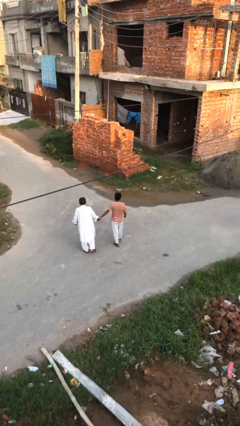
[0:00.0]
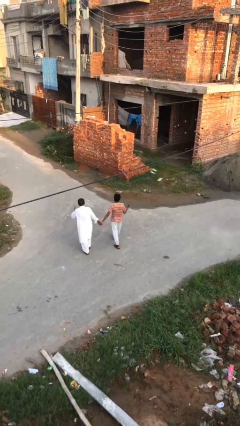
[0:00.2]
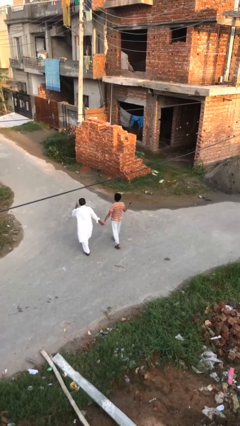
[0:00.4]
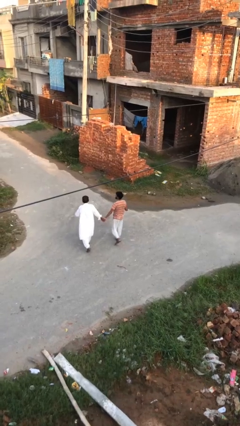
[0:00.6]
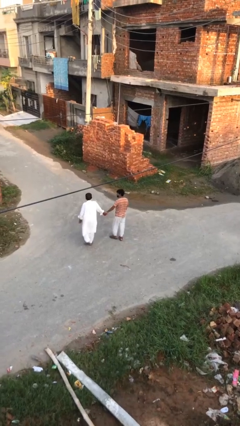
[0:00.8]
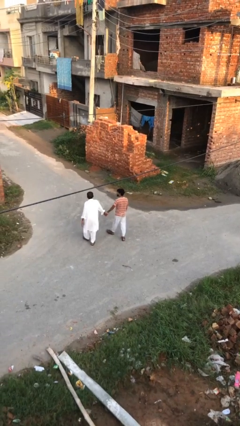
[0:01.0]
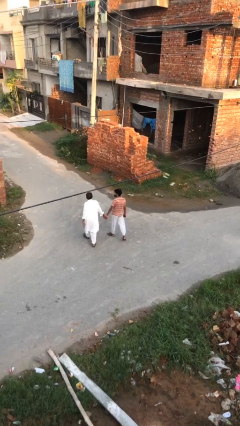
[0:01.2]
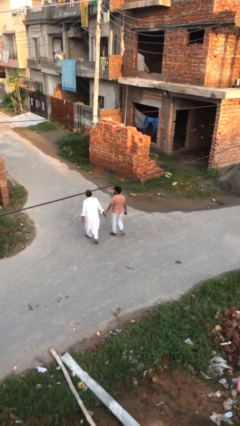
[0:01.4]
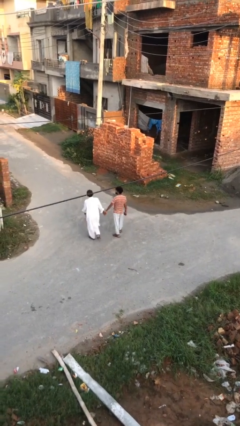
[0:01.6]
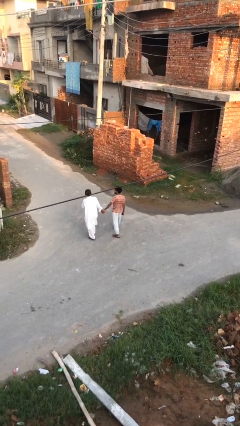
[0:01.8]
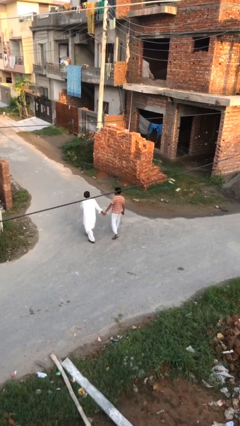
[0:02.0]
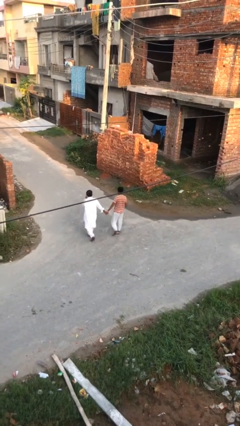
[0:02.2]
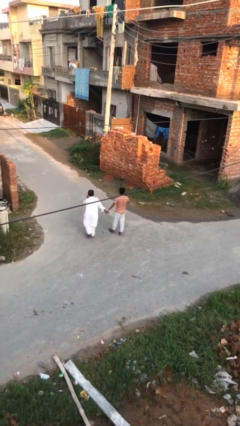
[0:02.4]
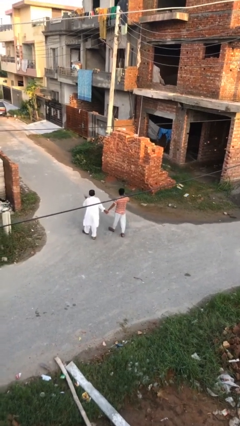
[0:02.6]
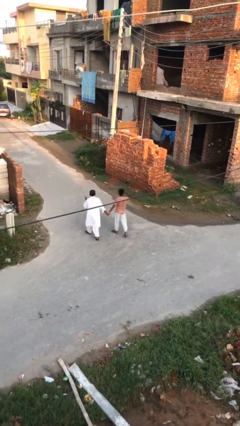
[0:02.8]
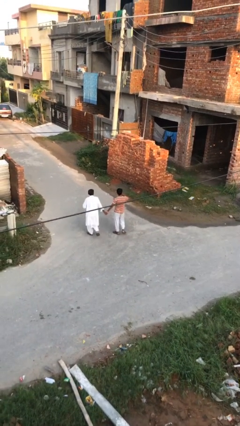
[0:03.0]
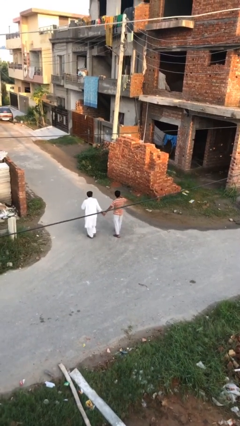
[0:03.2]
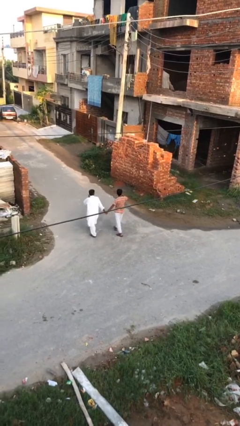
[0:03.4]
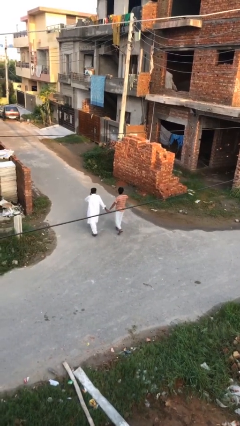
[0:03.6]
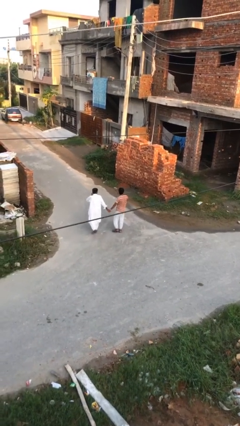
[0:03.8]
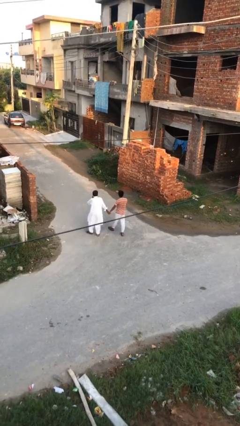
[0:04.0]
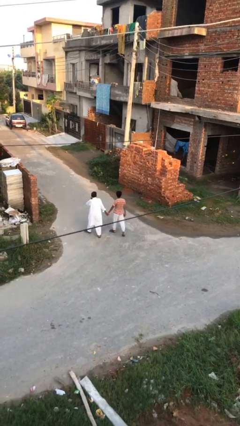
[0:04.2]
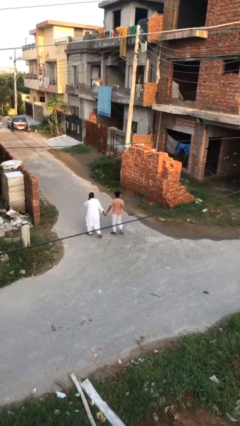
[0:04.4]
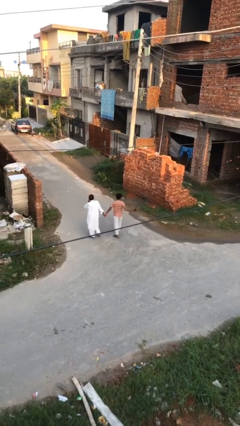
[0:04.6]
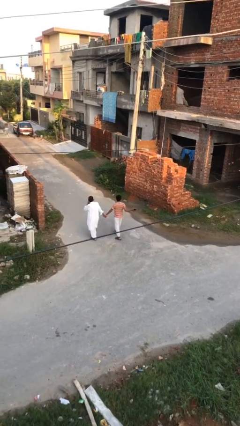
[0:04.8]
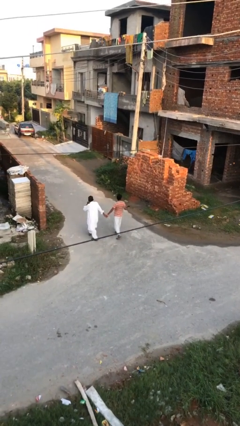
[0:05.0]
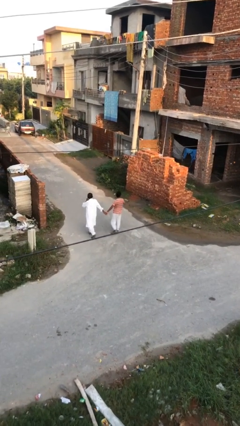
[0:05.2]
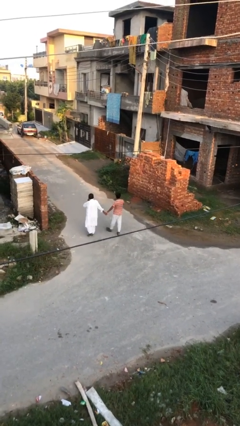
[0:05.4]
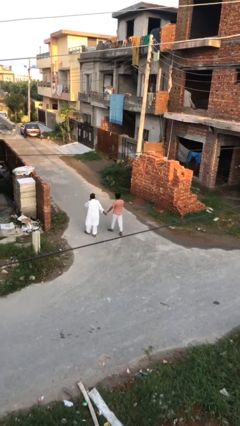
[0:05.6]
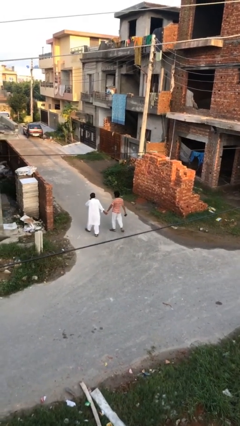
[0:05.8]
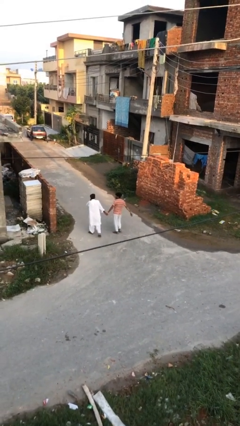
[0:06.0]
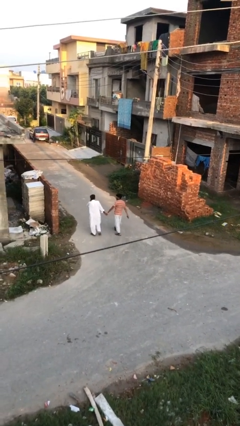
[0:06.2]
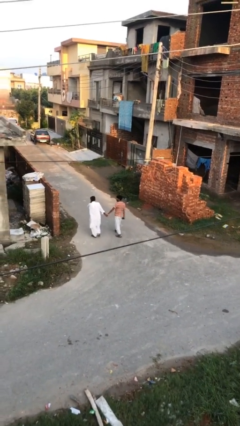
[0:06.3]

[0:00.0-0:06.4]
person holds hand

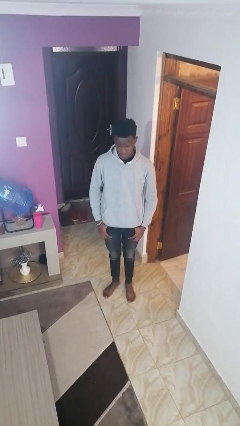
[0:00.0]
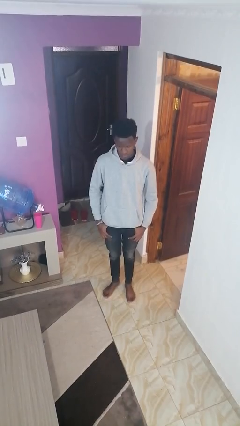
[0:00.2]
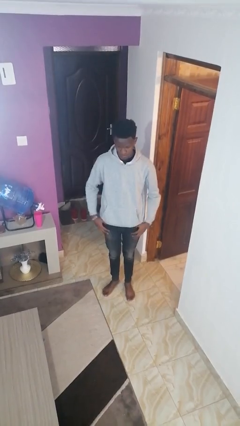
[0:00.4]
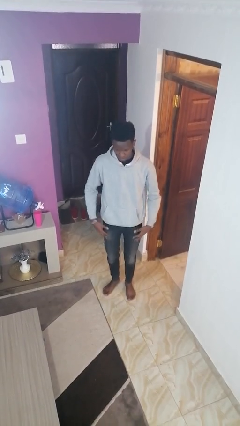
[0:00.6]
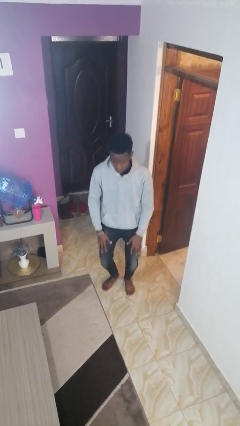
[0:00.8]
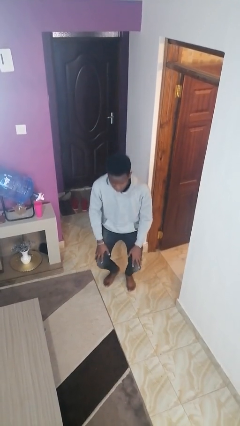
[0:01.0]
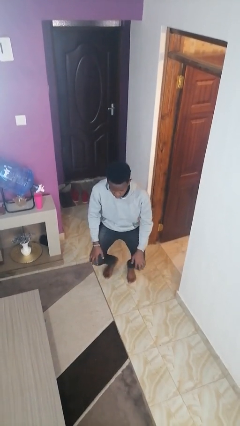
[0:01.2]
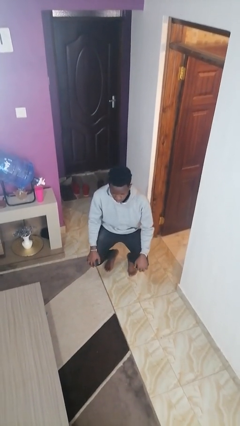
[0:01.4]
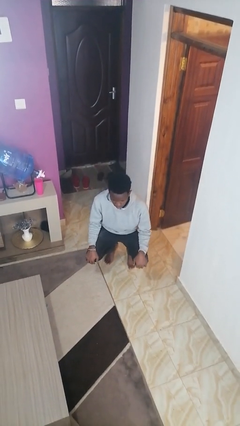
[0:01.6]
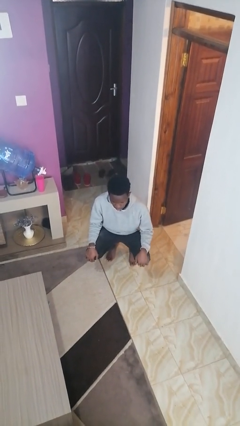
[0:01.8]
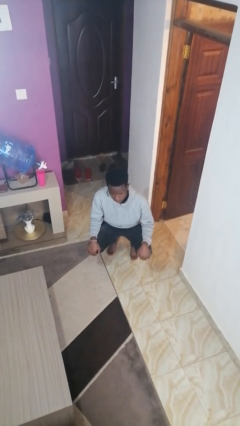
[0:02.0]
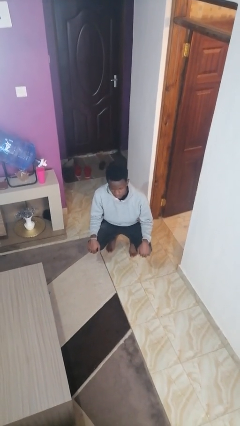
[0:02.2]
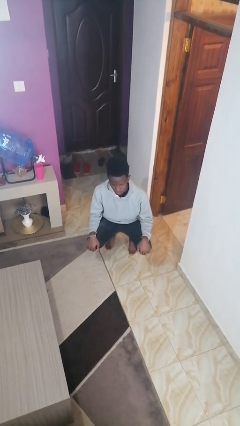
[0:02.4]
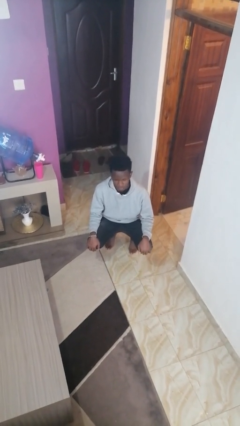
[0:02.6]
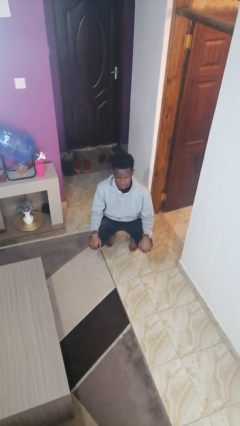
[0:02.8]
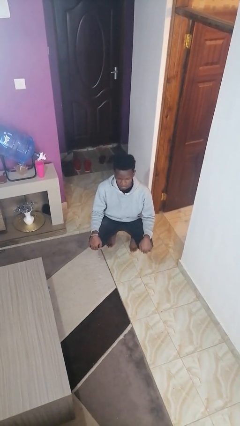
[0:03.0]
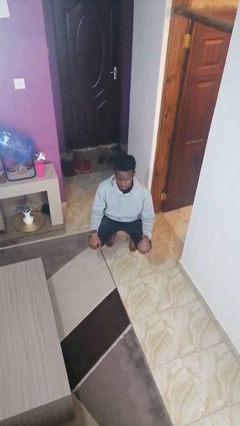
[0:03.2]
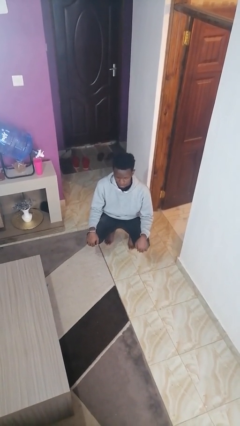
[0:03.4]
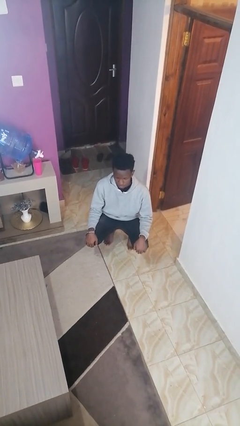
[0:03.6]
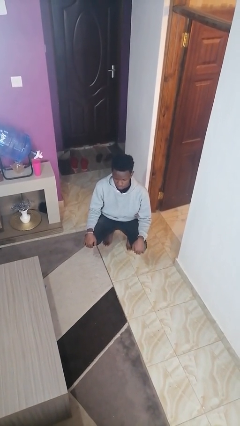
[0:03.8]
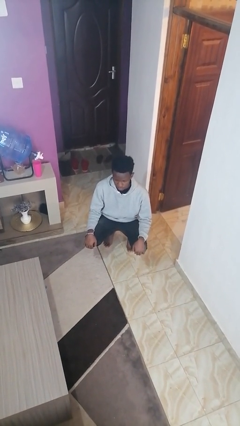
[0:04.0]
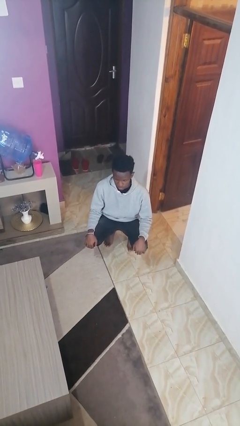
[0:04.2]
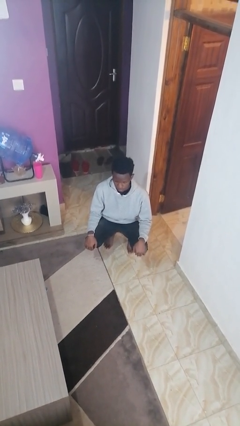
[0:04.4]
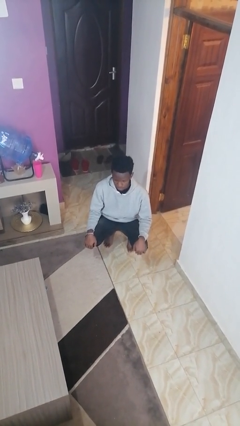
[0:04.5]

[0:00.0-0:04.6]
person squats

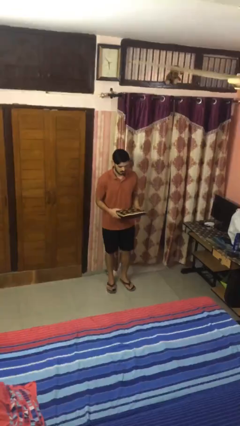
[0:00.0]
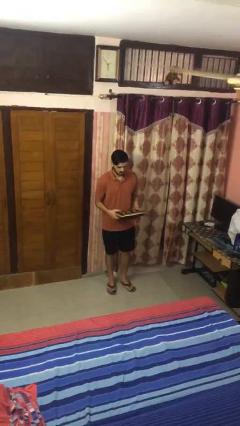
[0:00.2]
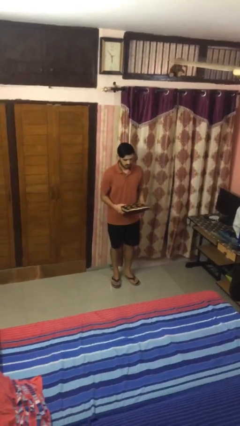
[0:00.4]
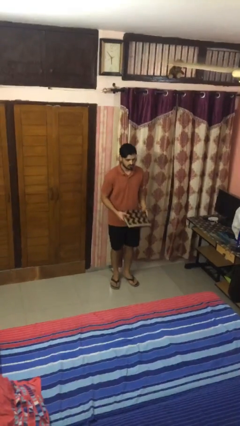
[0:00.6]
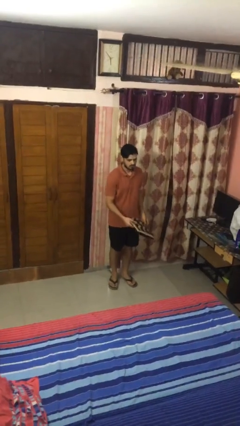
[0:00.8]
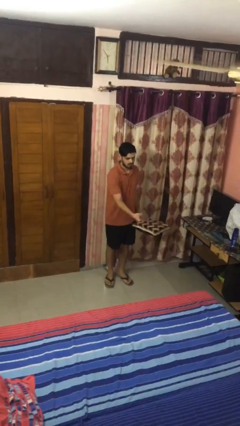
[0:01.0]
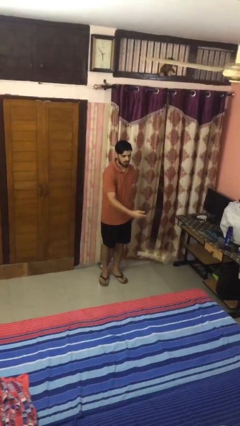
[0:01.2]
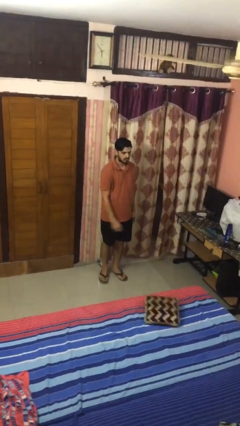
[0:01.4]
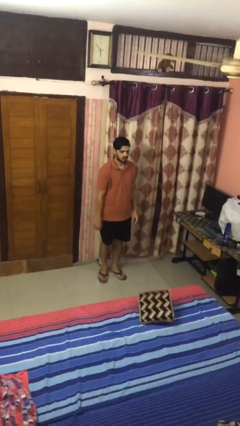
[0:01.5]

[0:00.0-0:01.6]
person throws object on bed

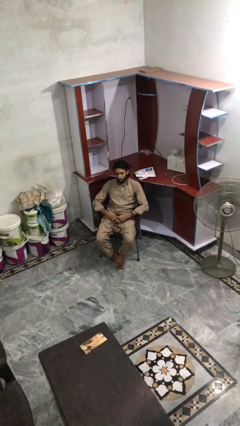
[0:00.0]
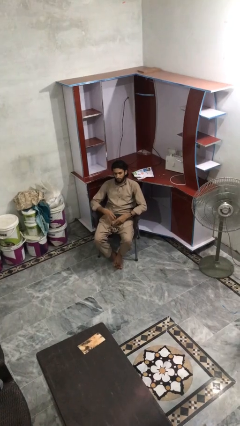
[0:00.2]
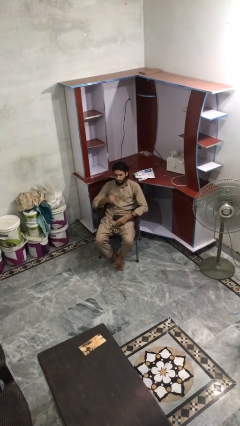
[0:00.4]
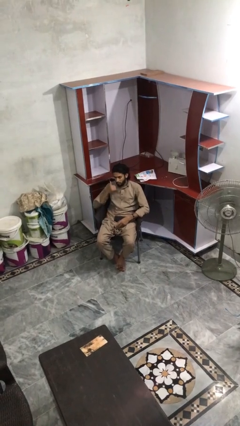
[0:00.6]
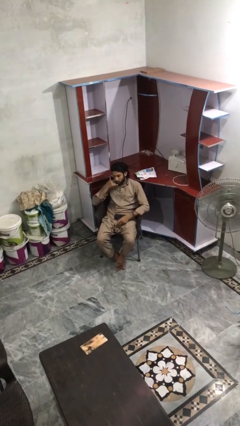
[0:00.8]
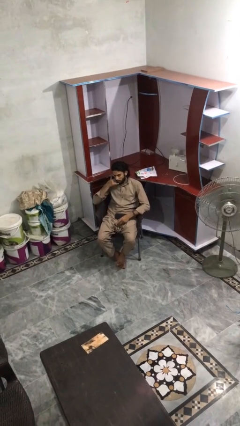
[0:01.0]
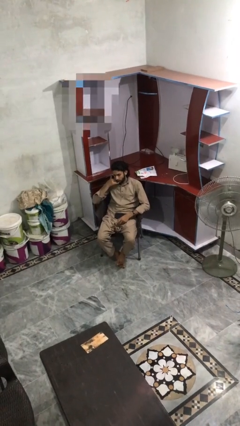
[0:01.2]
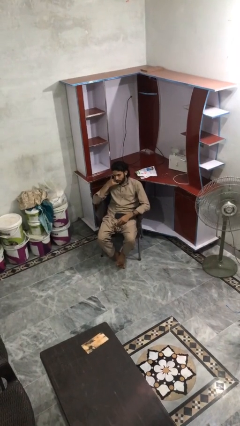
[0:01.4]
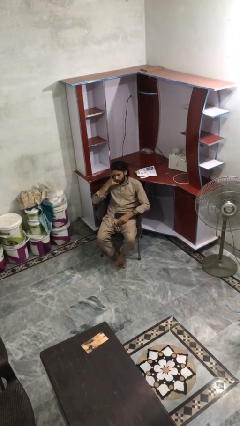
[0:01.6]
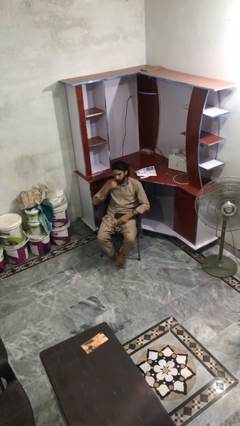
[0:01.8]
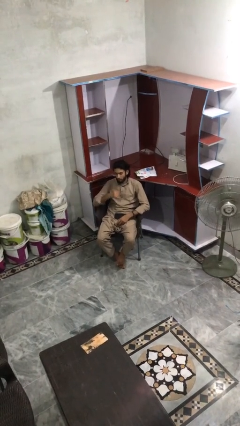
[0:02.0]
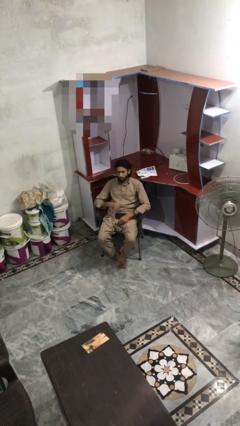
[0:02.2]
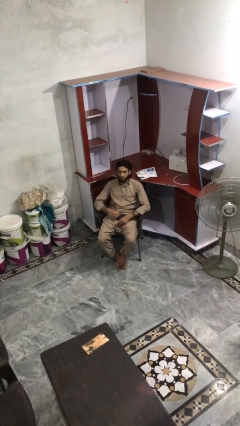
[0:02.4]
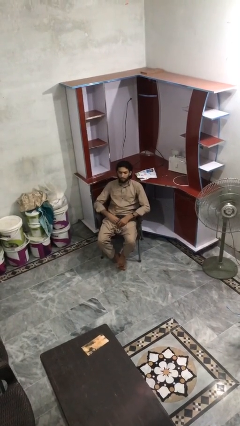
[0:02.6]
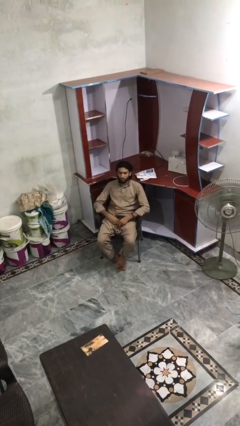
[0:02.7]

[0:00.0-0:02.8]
person gestures call me

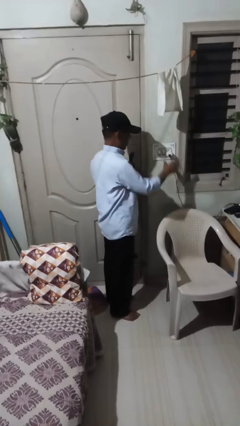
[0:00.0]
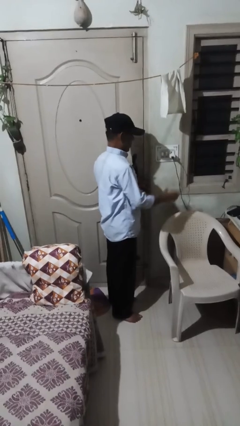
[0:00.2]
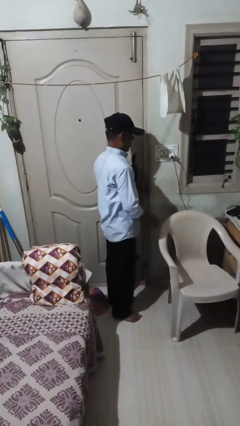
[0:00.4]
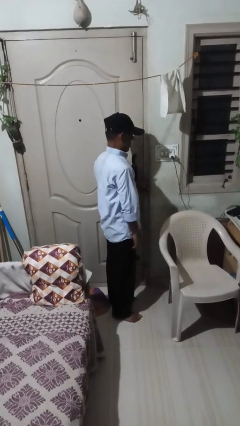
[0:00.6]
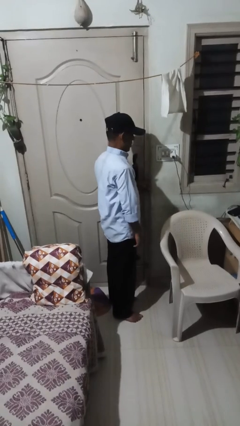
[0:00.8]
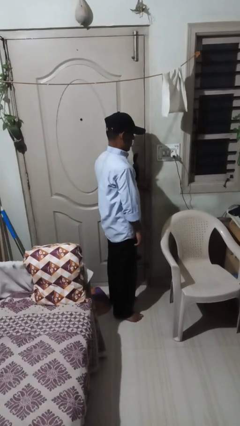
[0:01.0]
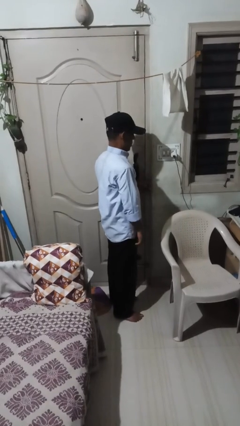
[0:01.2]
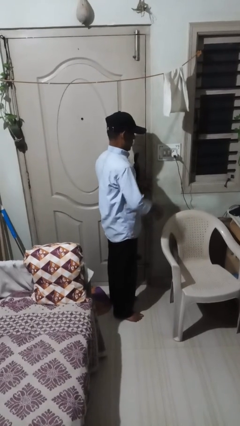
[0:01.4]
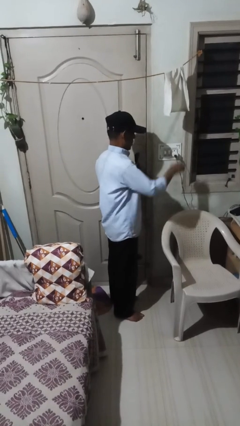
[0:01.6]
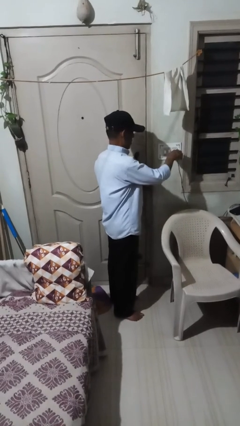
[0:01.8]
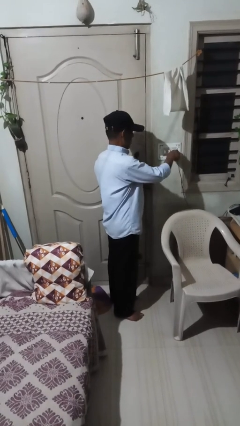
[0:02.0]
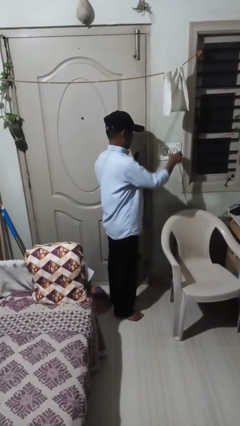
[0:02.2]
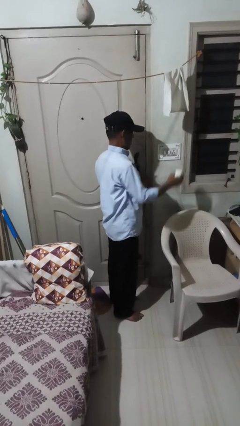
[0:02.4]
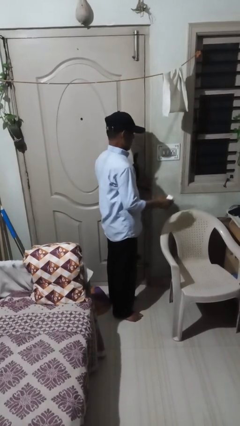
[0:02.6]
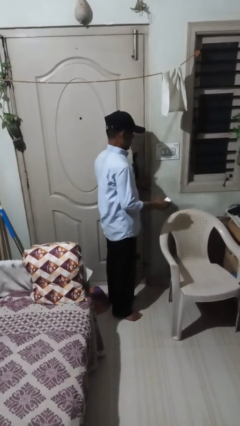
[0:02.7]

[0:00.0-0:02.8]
person unplugs from electrical socket
